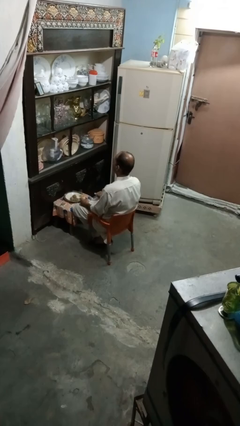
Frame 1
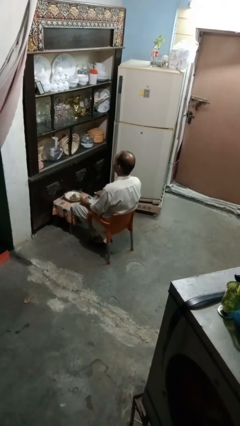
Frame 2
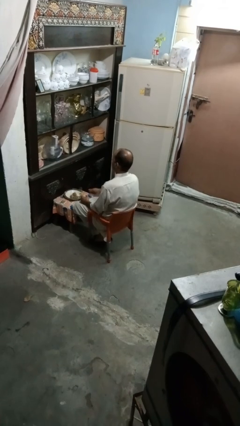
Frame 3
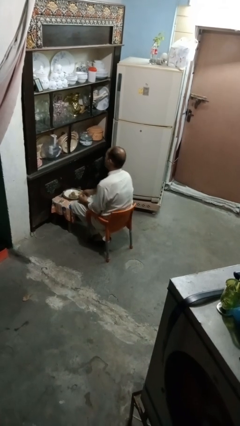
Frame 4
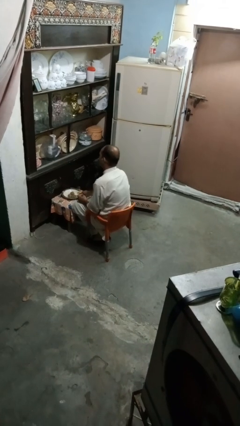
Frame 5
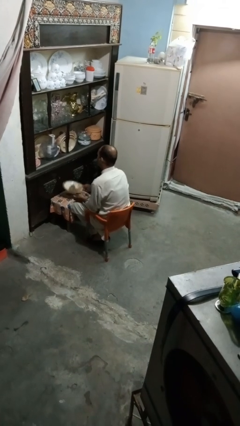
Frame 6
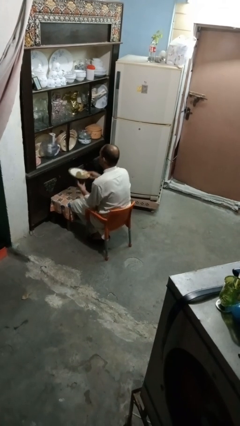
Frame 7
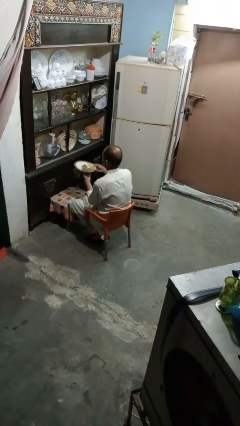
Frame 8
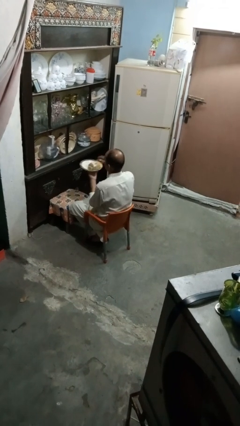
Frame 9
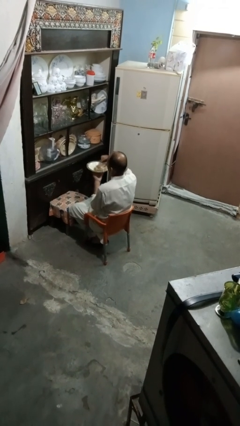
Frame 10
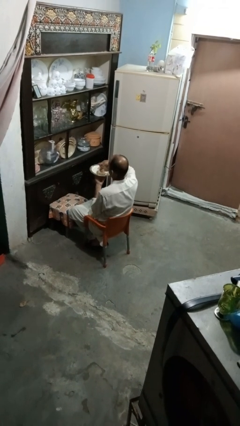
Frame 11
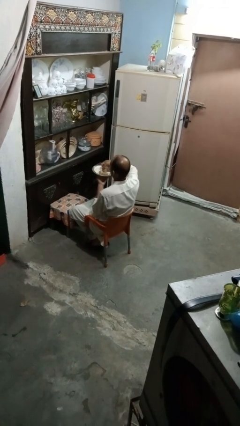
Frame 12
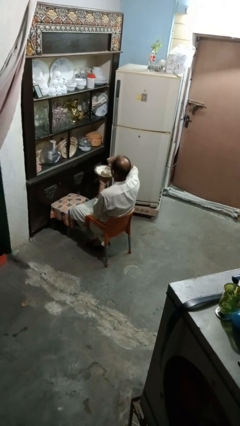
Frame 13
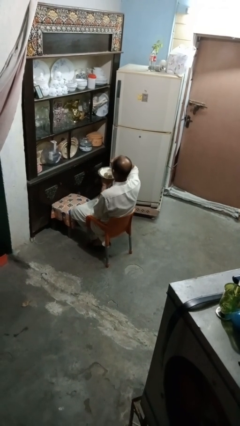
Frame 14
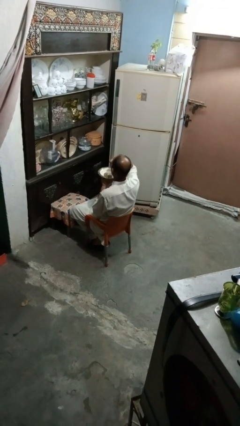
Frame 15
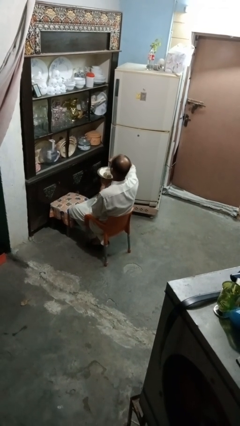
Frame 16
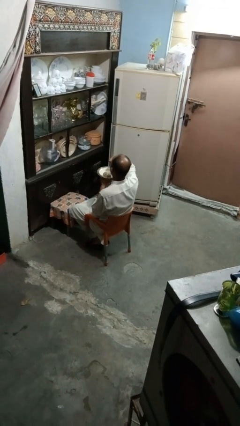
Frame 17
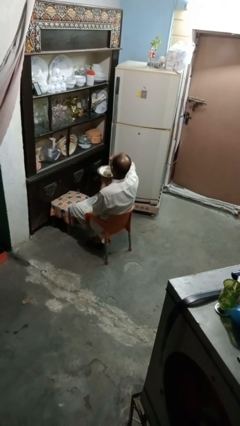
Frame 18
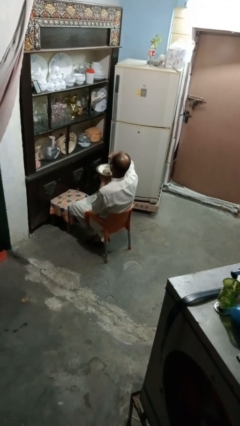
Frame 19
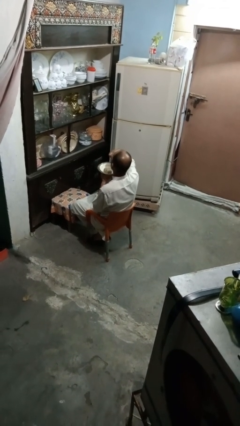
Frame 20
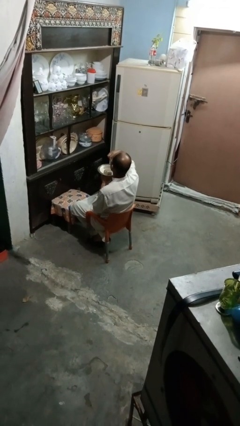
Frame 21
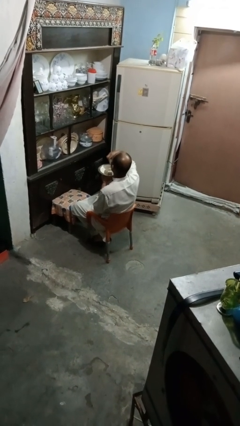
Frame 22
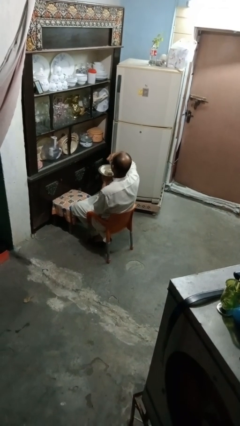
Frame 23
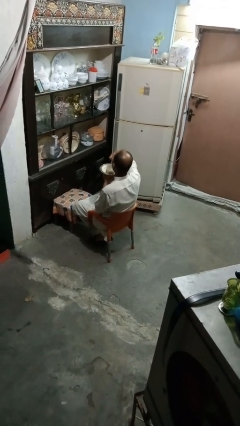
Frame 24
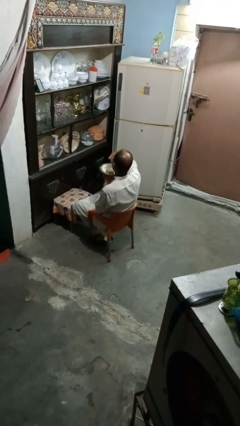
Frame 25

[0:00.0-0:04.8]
person eats with hands

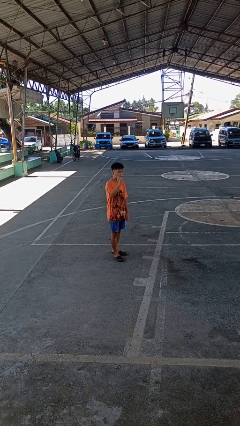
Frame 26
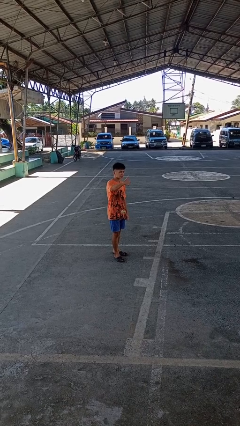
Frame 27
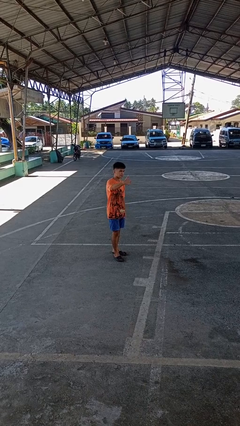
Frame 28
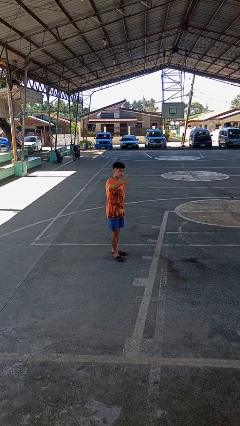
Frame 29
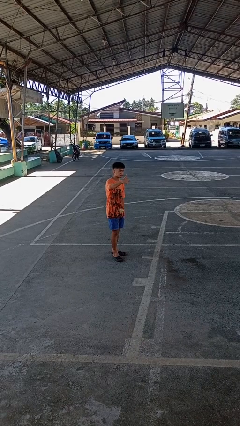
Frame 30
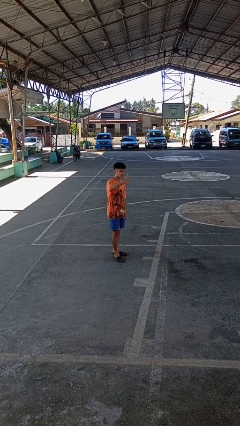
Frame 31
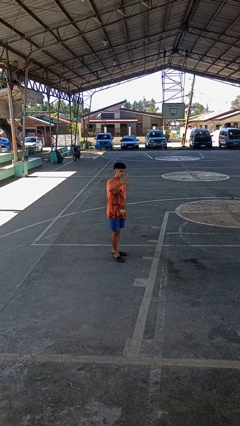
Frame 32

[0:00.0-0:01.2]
person gestures thumbs up

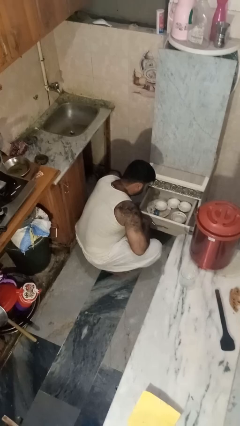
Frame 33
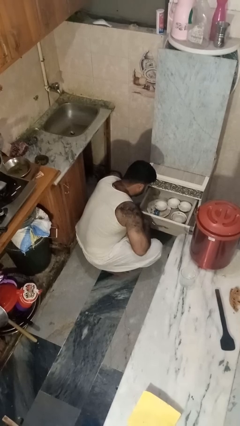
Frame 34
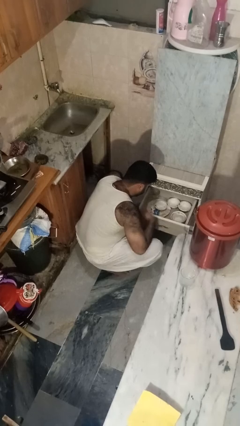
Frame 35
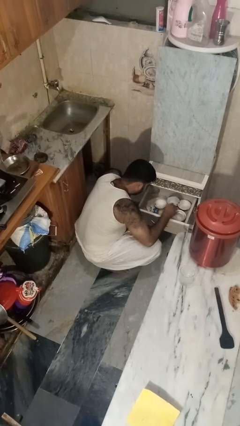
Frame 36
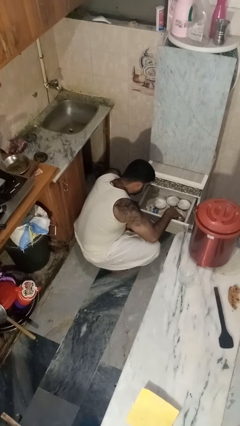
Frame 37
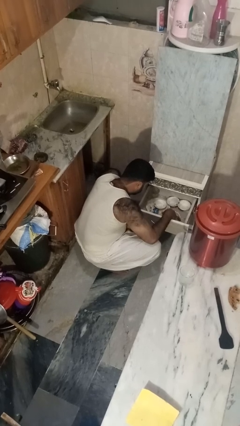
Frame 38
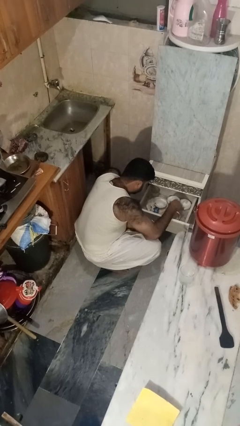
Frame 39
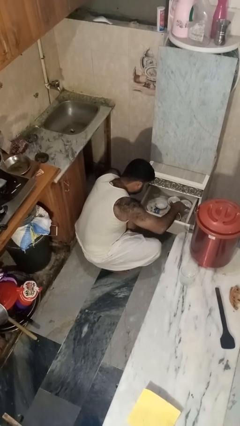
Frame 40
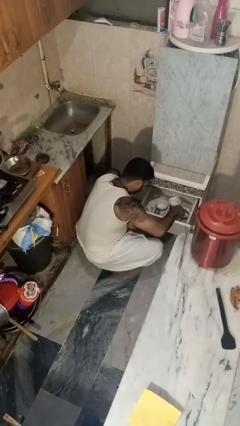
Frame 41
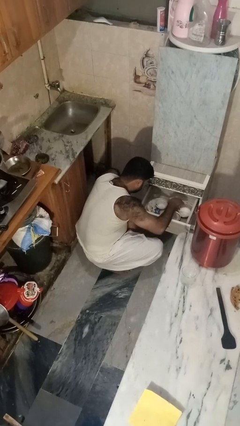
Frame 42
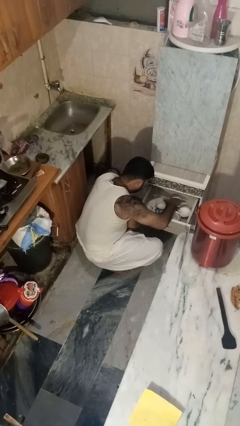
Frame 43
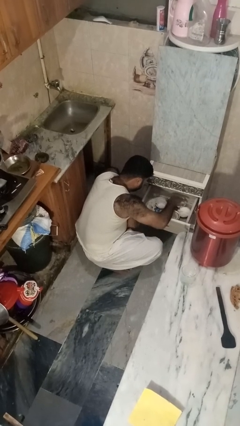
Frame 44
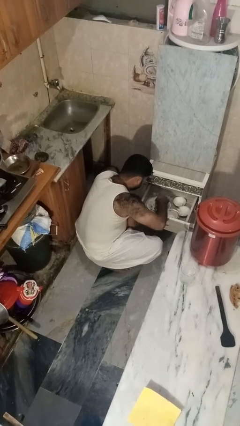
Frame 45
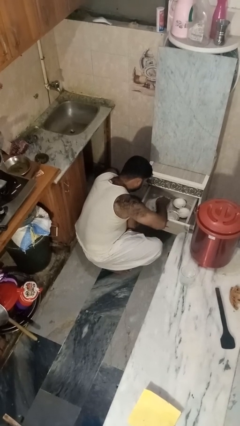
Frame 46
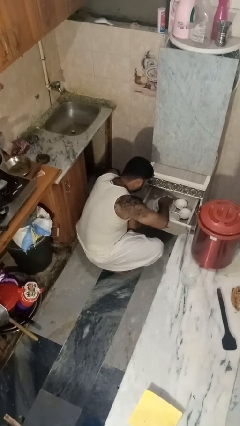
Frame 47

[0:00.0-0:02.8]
person searches in kitchen drawer

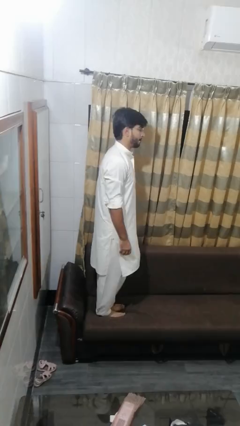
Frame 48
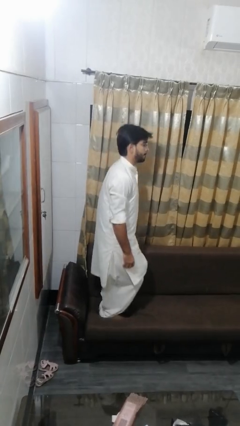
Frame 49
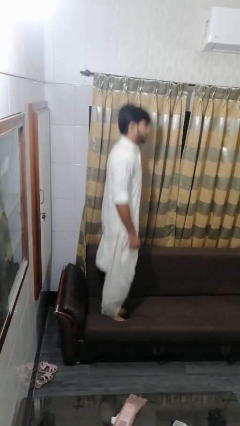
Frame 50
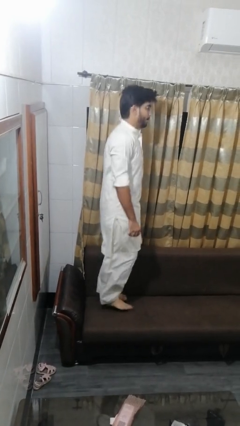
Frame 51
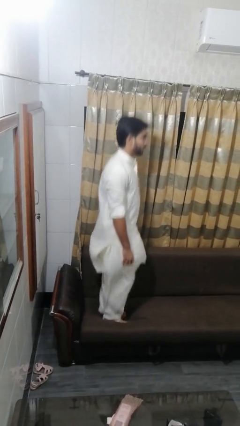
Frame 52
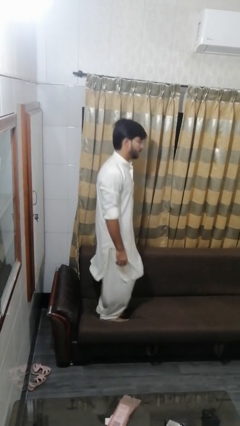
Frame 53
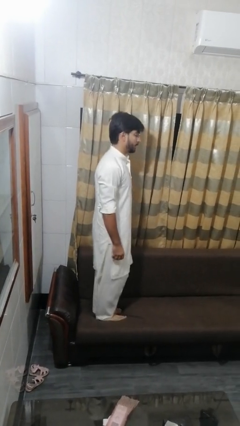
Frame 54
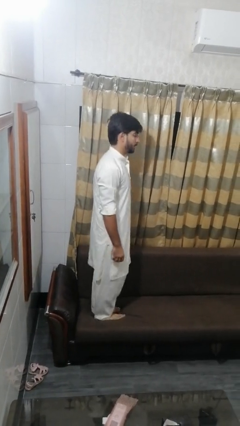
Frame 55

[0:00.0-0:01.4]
person jumps on couch

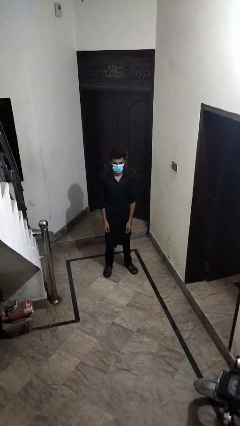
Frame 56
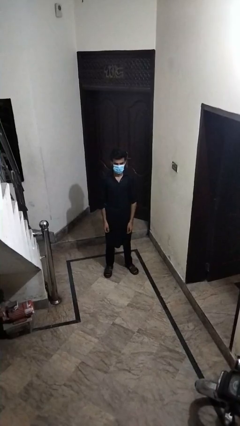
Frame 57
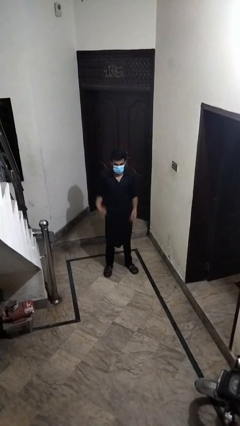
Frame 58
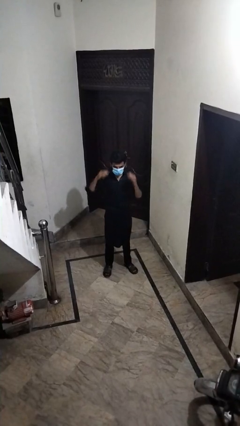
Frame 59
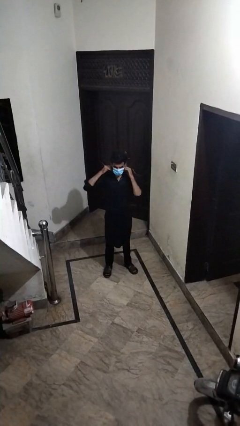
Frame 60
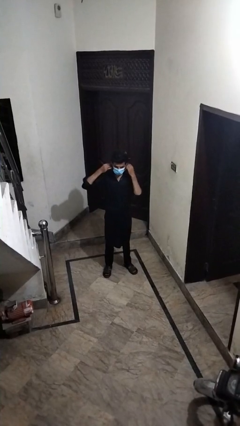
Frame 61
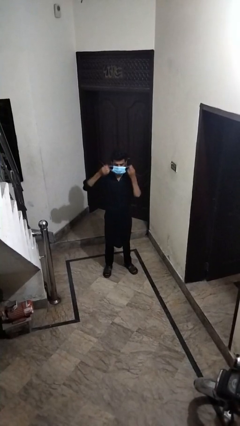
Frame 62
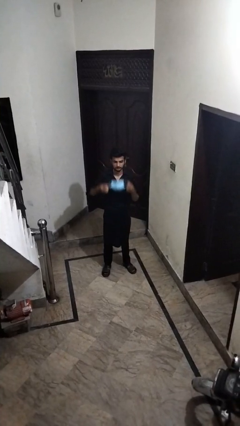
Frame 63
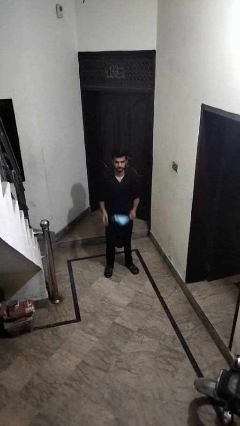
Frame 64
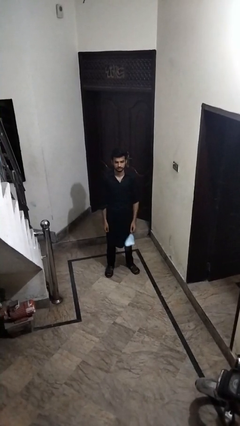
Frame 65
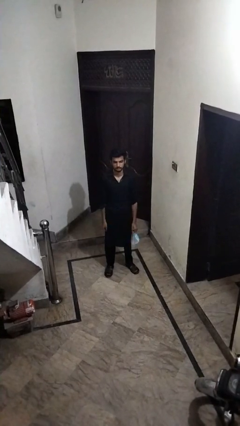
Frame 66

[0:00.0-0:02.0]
person takes off facemask

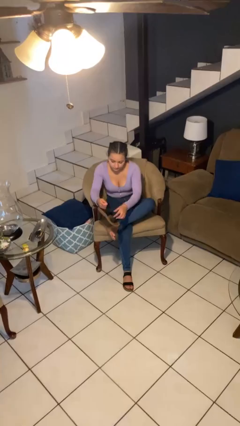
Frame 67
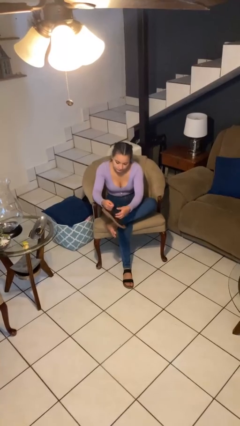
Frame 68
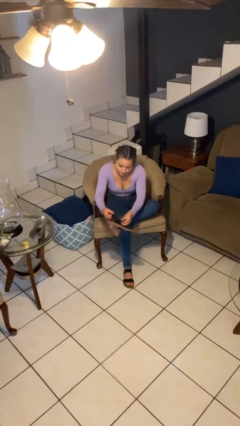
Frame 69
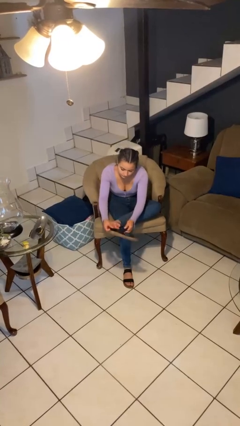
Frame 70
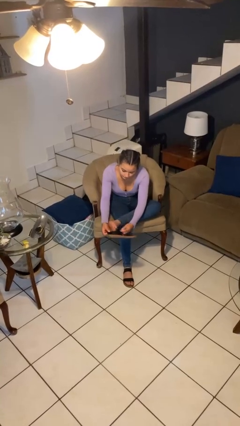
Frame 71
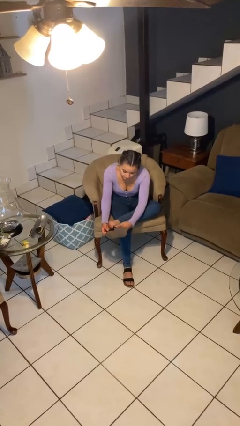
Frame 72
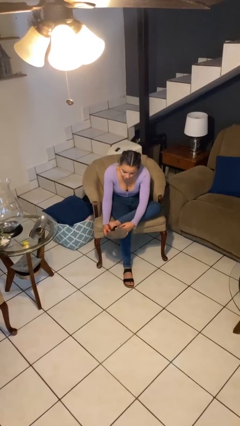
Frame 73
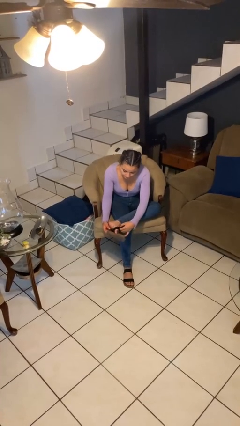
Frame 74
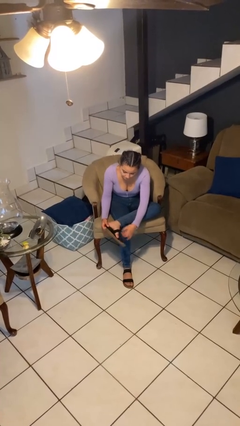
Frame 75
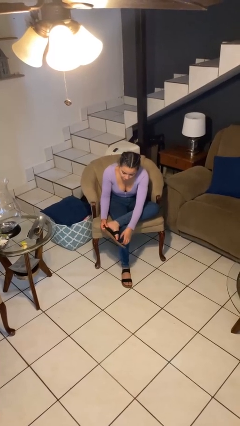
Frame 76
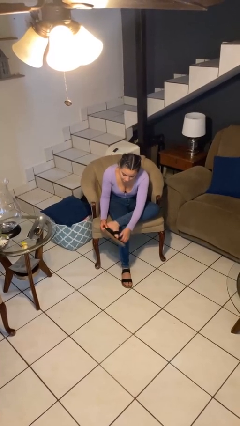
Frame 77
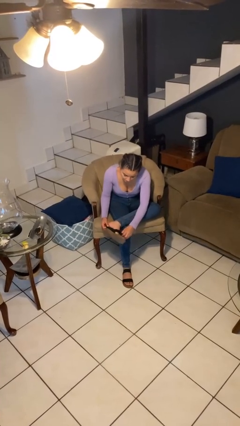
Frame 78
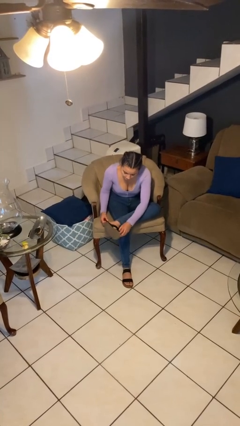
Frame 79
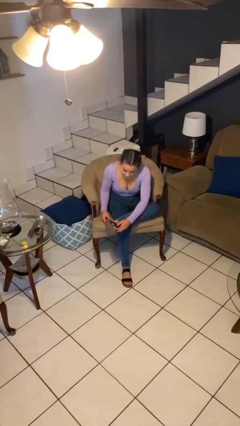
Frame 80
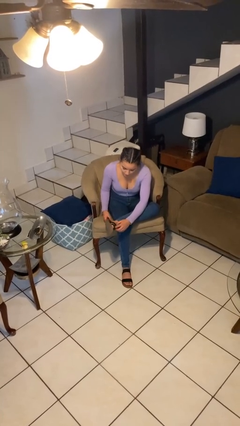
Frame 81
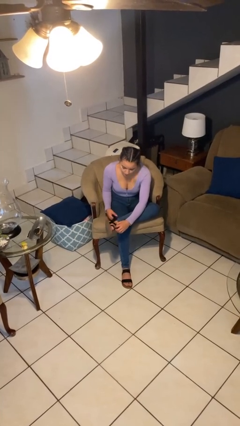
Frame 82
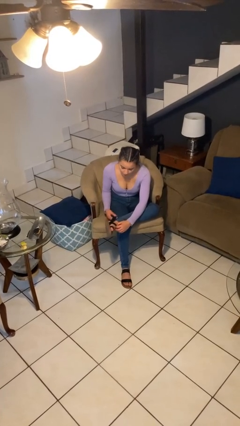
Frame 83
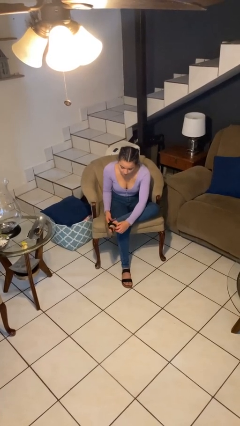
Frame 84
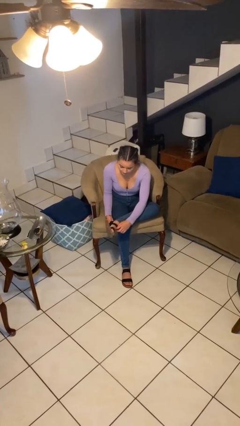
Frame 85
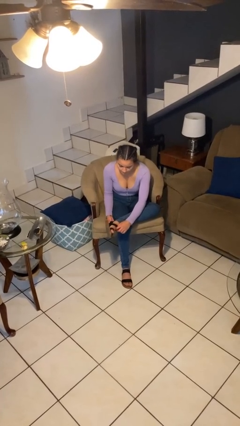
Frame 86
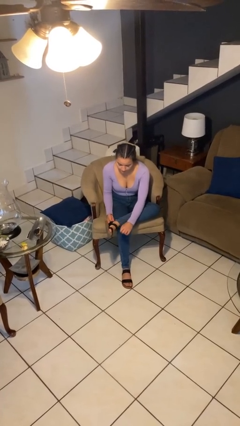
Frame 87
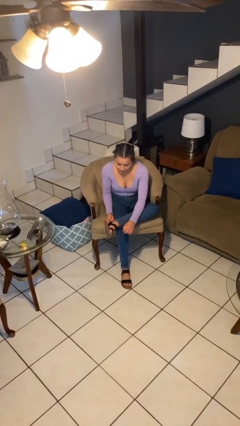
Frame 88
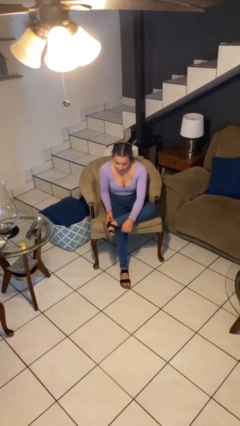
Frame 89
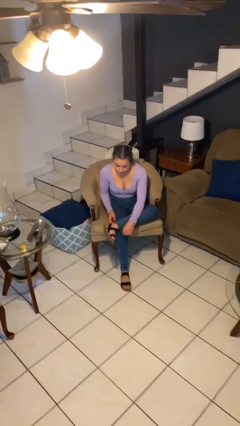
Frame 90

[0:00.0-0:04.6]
person puts on shoes

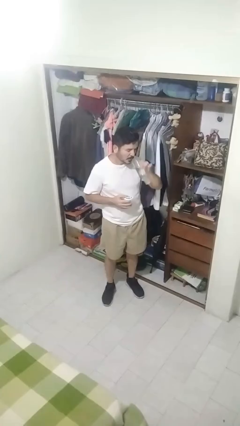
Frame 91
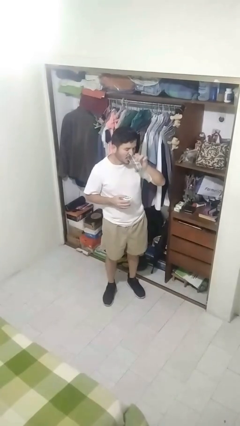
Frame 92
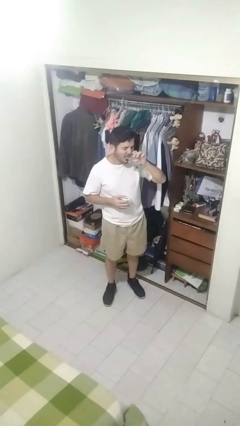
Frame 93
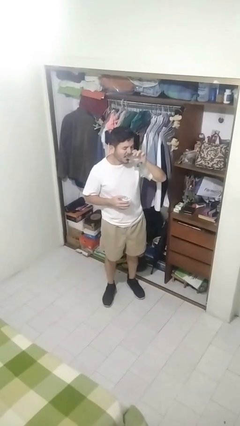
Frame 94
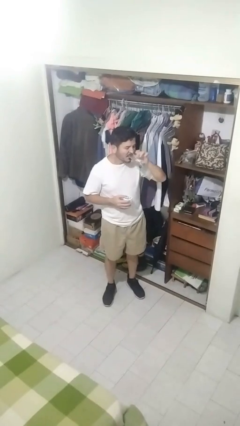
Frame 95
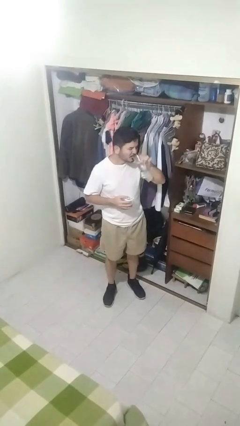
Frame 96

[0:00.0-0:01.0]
person drinks from cup
